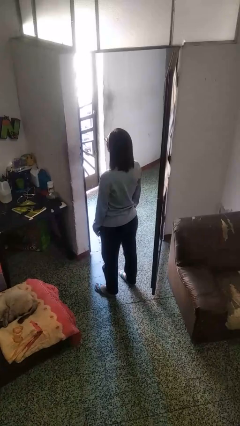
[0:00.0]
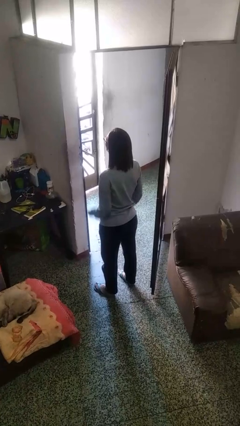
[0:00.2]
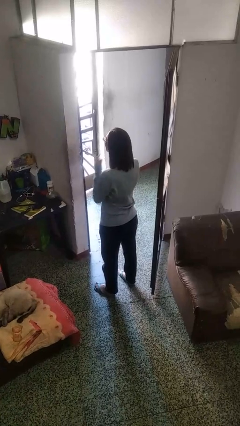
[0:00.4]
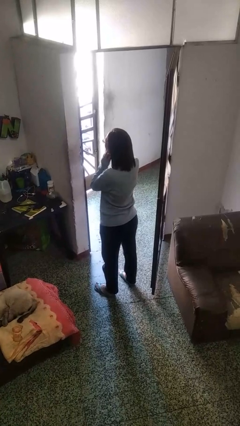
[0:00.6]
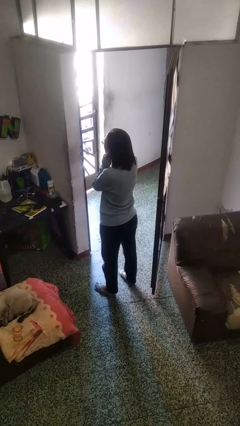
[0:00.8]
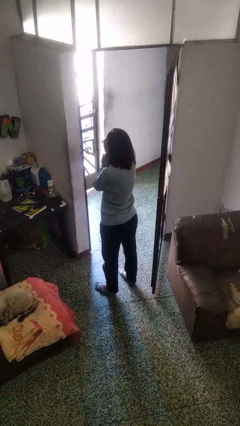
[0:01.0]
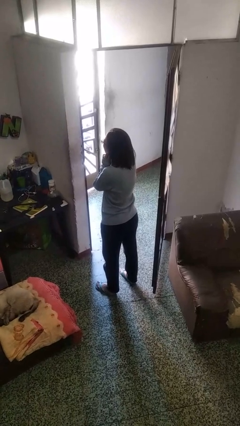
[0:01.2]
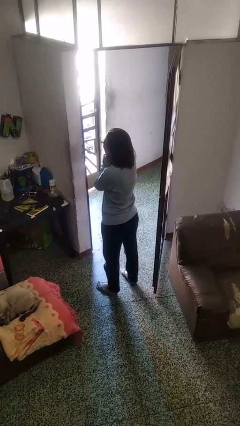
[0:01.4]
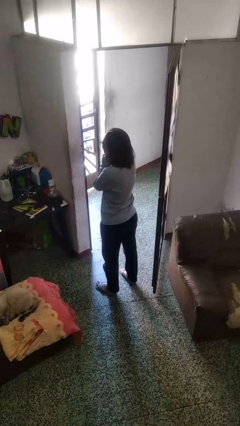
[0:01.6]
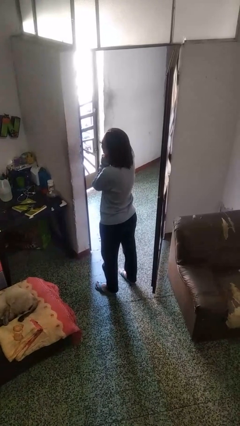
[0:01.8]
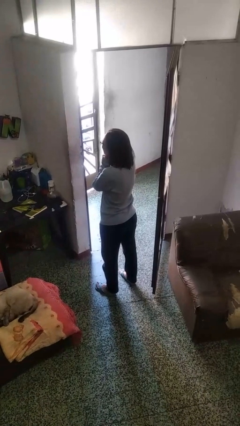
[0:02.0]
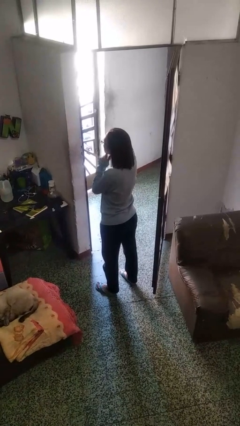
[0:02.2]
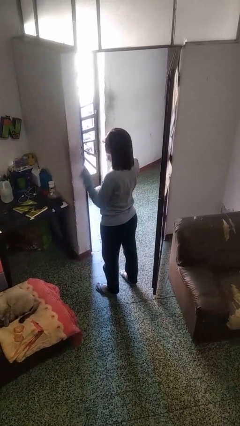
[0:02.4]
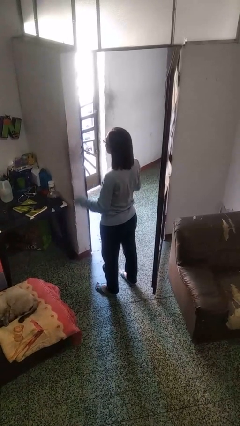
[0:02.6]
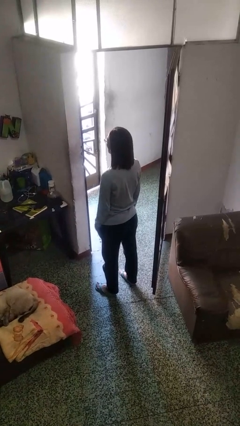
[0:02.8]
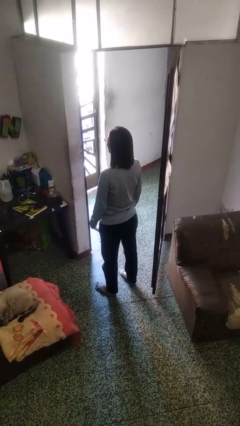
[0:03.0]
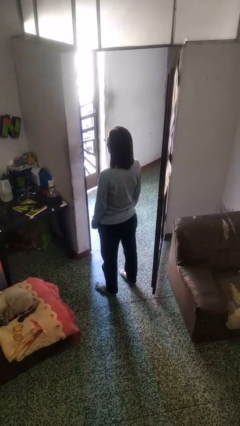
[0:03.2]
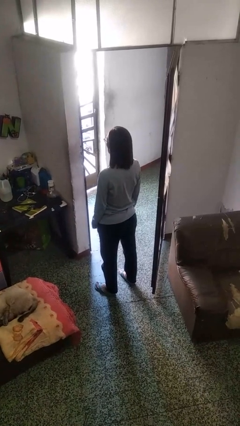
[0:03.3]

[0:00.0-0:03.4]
person puts fingers in ear

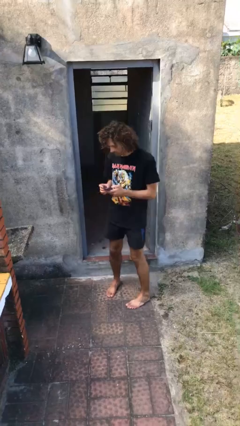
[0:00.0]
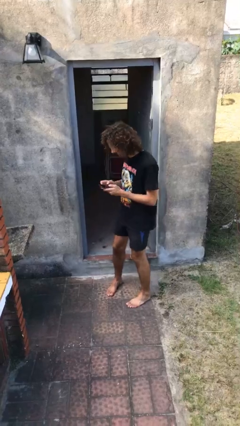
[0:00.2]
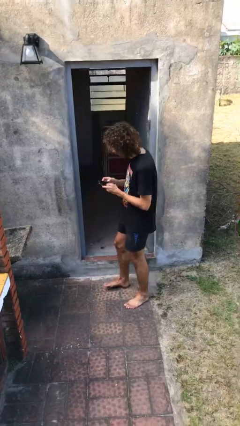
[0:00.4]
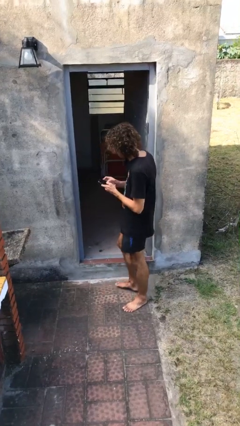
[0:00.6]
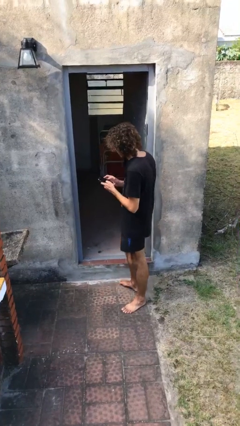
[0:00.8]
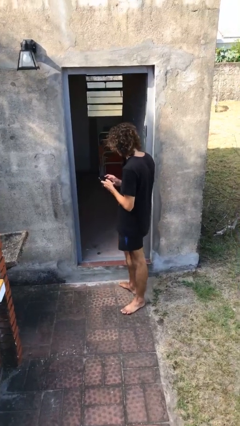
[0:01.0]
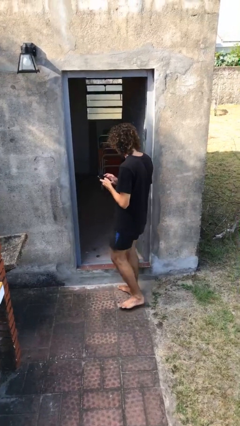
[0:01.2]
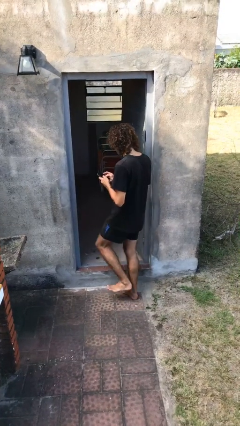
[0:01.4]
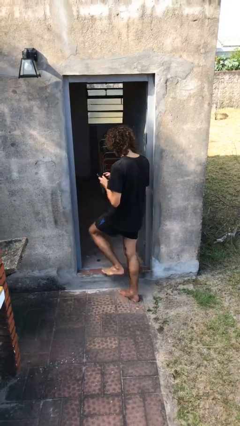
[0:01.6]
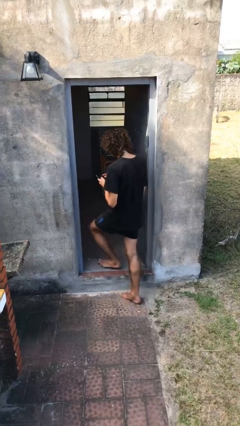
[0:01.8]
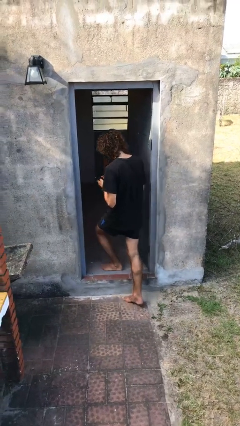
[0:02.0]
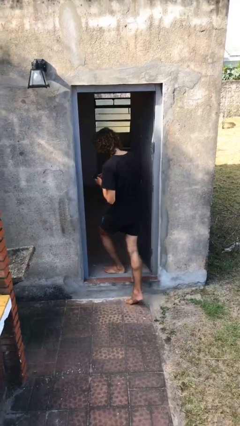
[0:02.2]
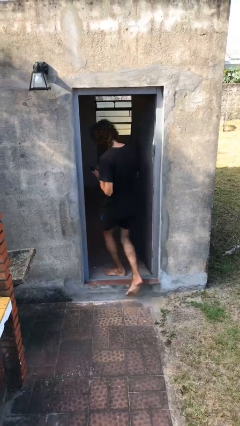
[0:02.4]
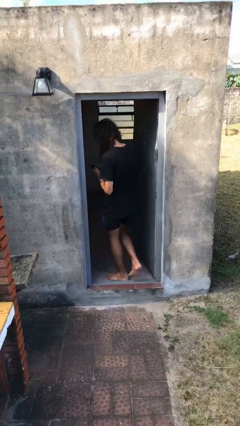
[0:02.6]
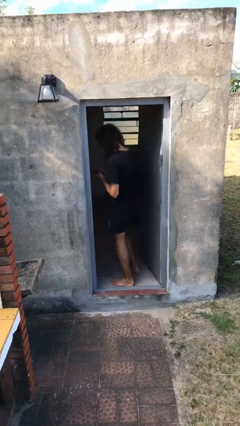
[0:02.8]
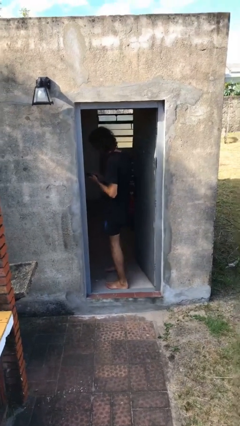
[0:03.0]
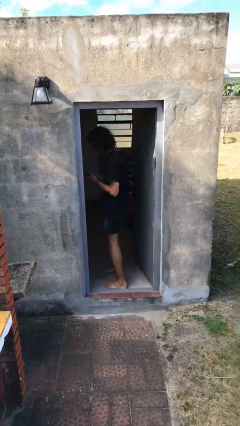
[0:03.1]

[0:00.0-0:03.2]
person exits scene through structure

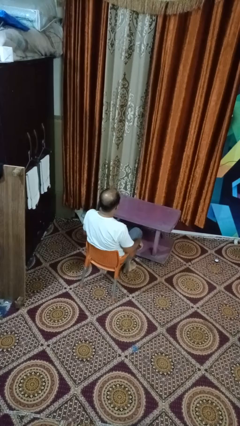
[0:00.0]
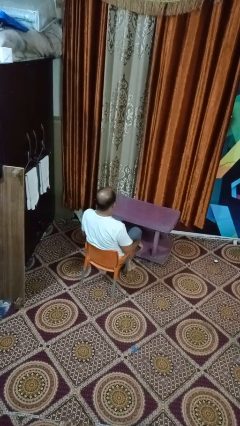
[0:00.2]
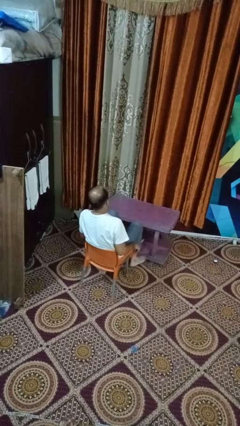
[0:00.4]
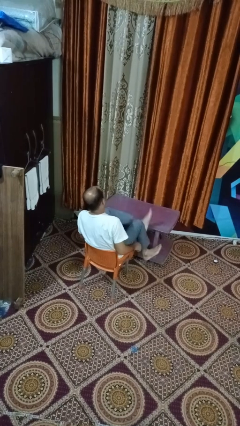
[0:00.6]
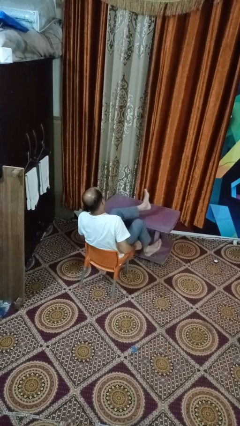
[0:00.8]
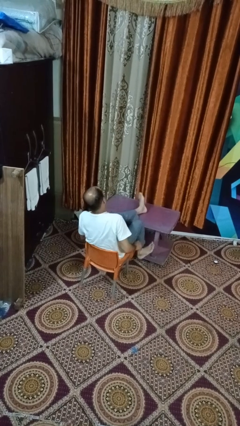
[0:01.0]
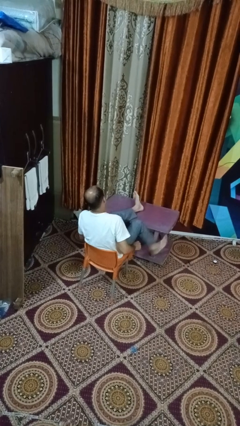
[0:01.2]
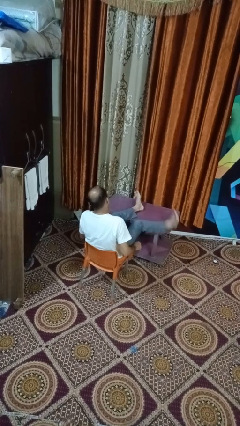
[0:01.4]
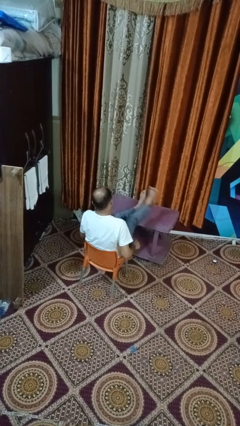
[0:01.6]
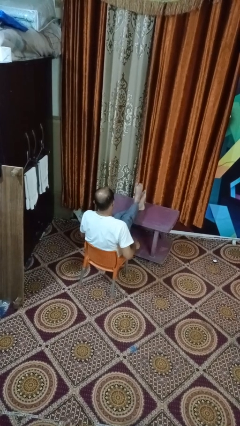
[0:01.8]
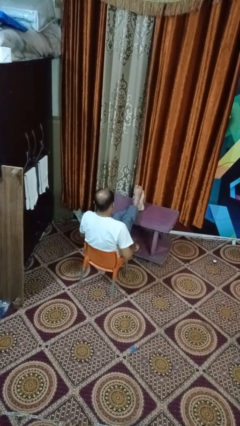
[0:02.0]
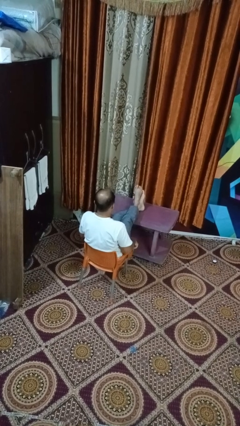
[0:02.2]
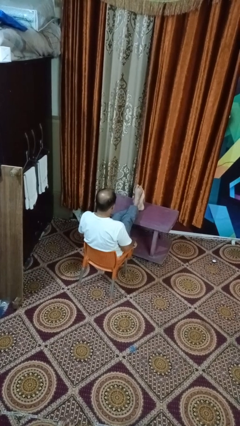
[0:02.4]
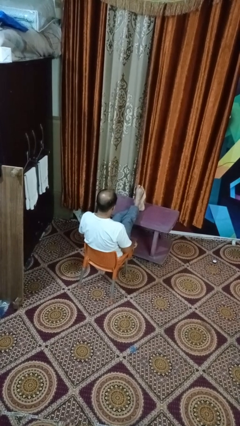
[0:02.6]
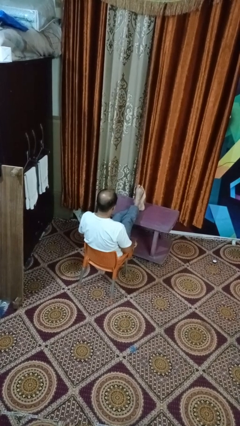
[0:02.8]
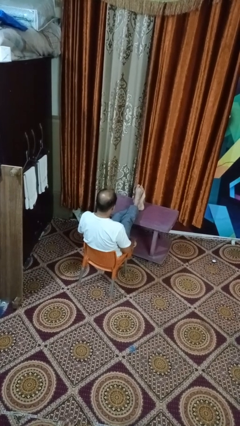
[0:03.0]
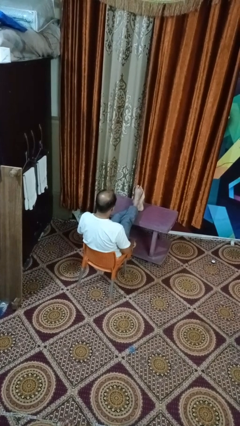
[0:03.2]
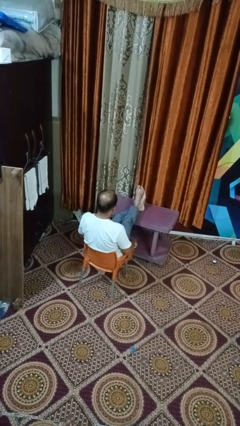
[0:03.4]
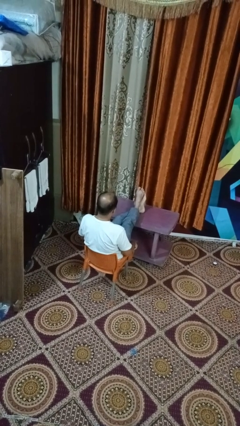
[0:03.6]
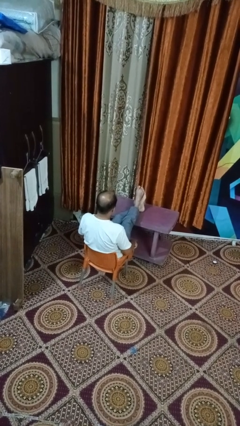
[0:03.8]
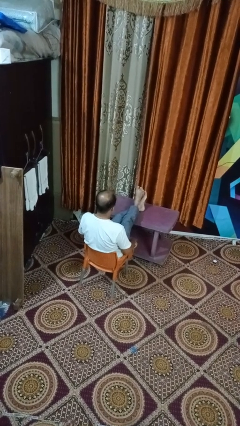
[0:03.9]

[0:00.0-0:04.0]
person puts feet up

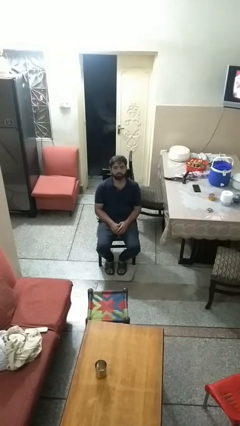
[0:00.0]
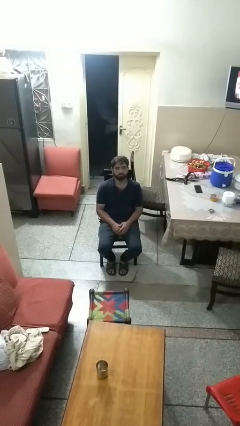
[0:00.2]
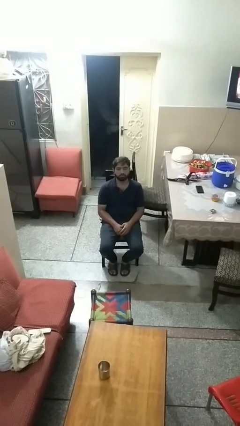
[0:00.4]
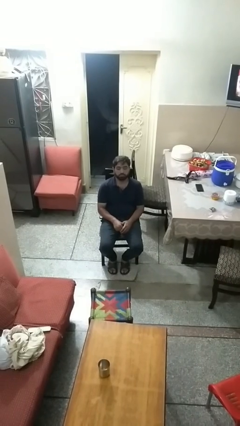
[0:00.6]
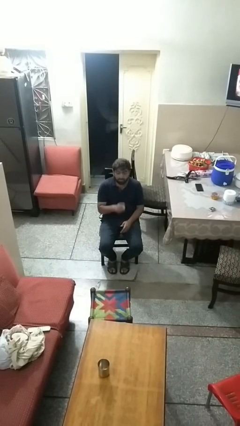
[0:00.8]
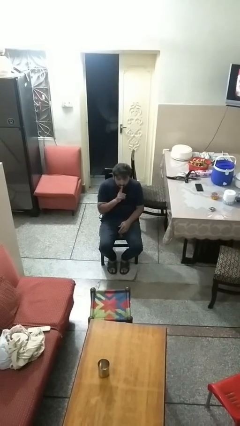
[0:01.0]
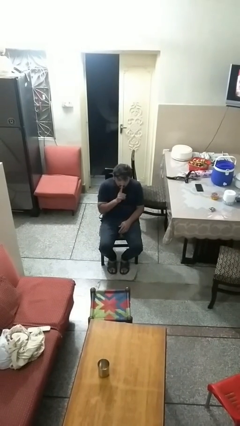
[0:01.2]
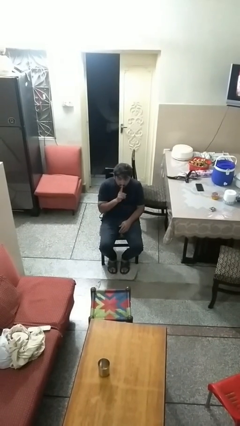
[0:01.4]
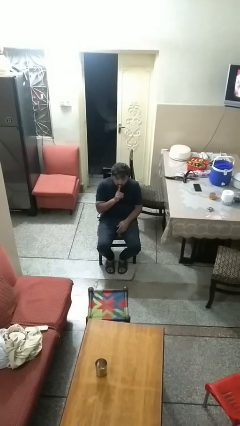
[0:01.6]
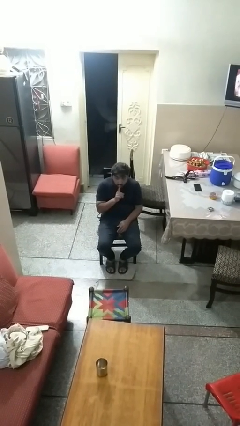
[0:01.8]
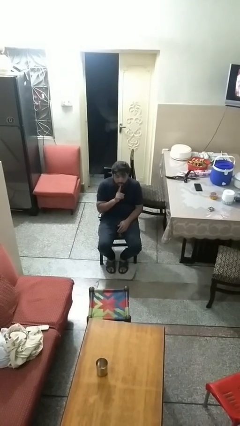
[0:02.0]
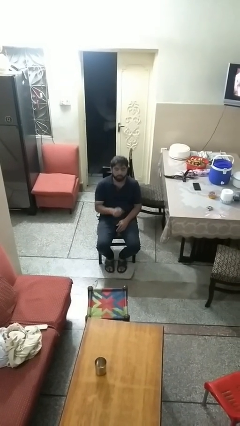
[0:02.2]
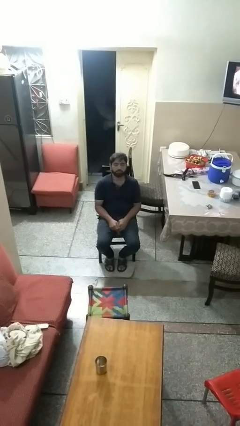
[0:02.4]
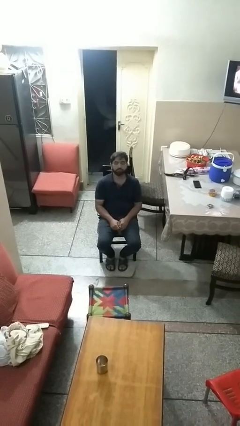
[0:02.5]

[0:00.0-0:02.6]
person gestures be quiet

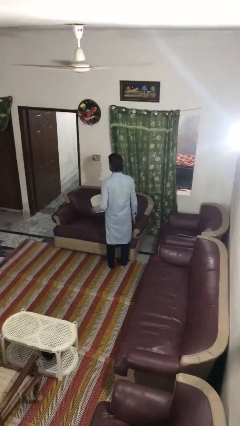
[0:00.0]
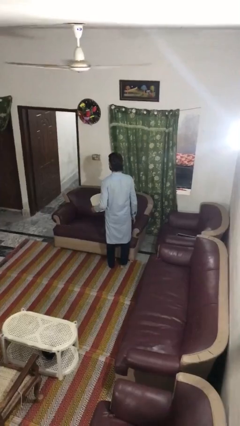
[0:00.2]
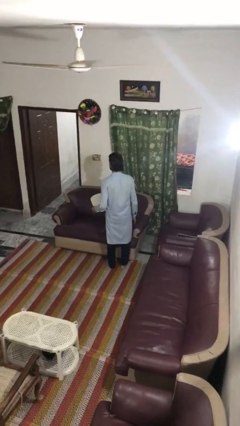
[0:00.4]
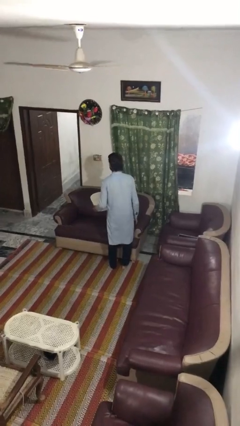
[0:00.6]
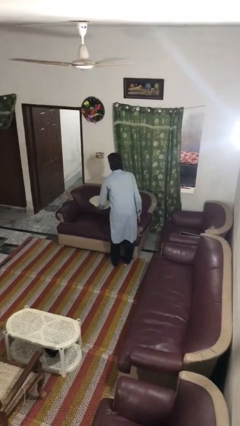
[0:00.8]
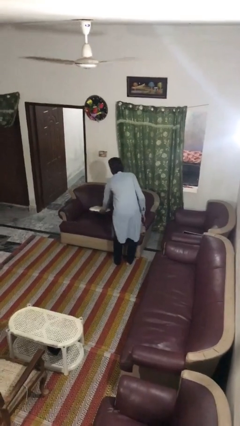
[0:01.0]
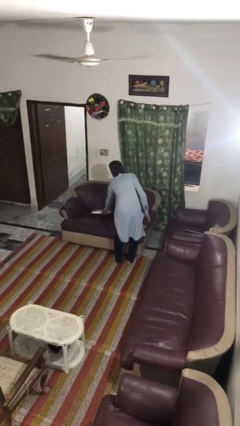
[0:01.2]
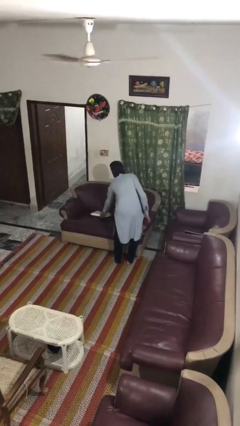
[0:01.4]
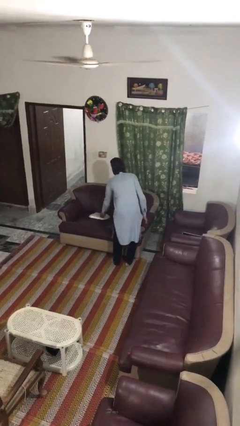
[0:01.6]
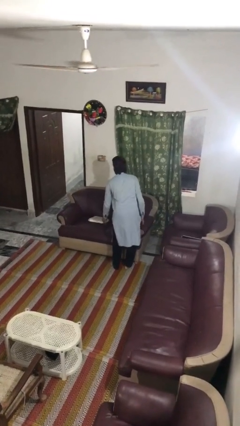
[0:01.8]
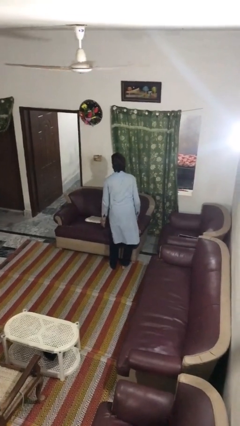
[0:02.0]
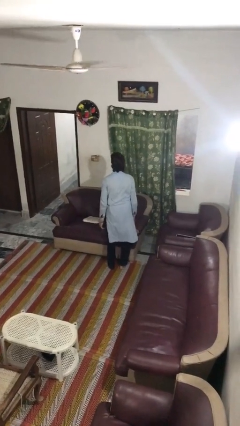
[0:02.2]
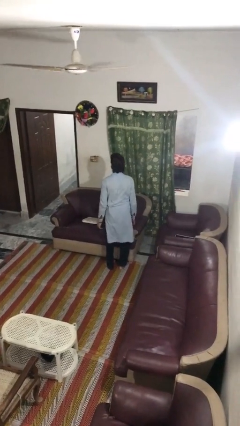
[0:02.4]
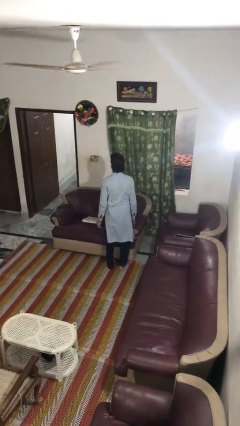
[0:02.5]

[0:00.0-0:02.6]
person puts down object on couch

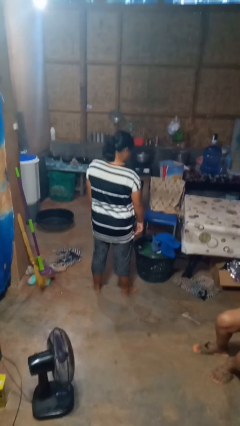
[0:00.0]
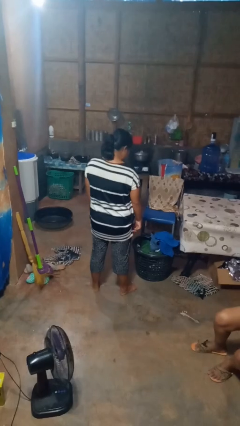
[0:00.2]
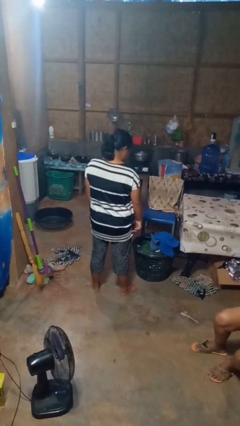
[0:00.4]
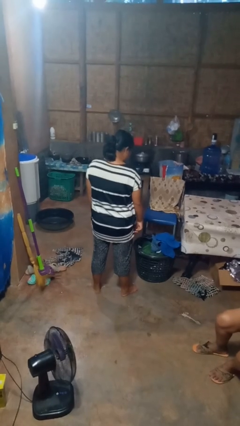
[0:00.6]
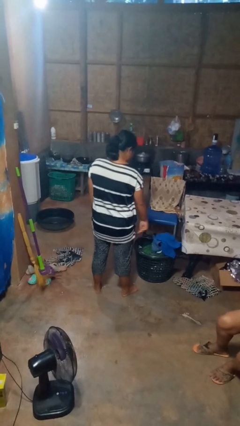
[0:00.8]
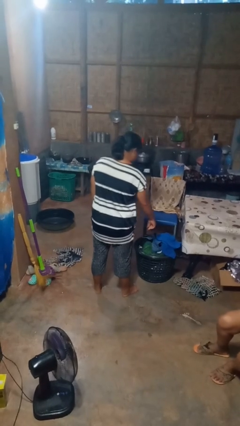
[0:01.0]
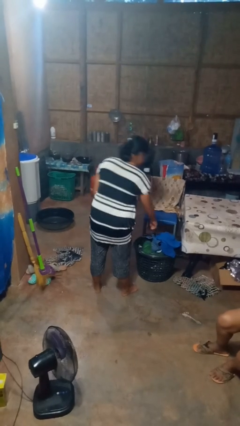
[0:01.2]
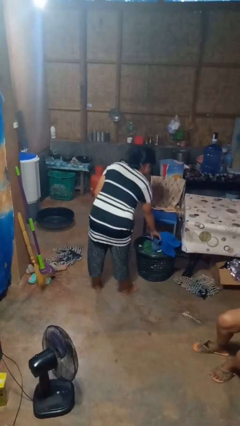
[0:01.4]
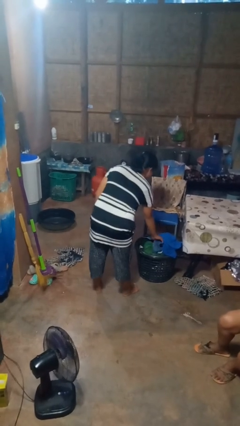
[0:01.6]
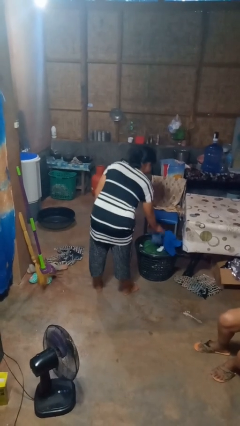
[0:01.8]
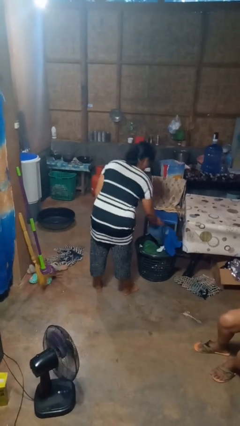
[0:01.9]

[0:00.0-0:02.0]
person takes object from basket
